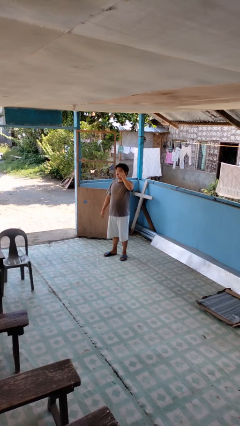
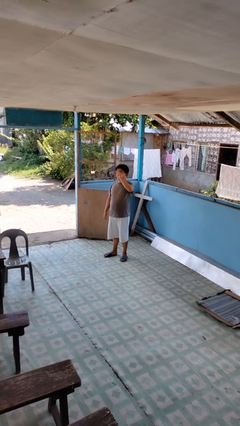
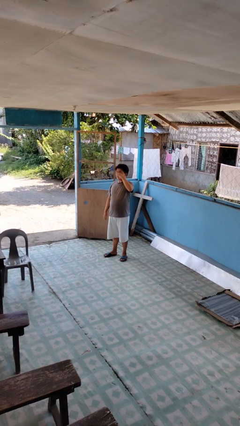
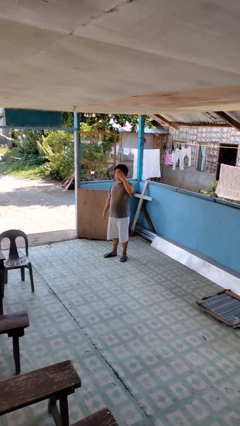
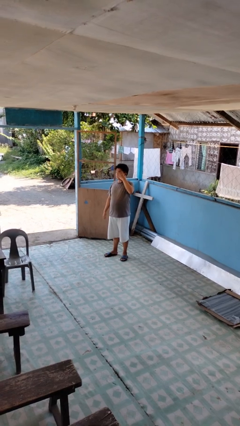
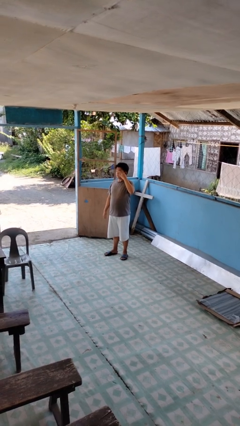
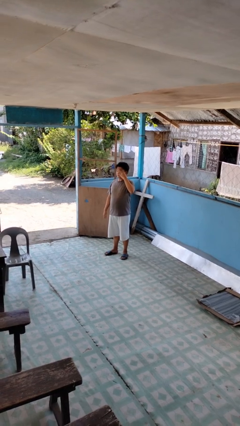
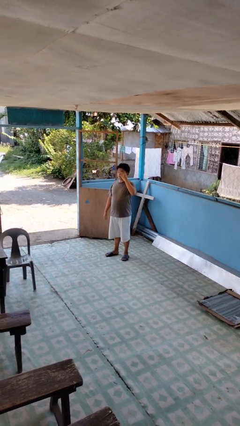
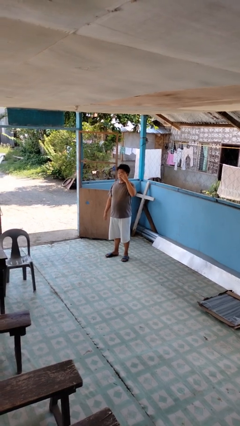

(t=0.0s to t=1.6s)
person rubs eyes

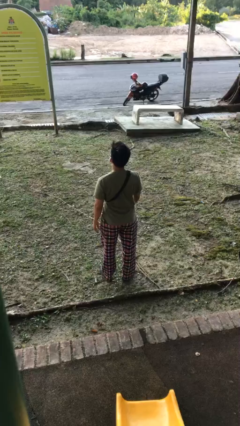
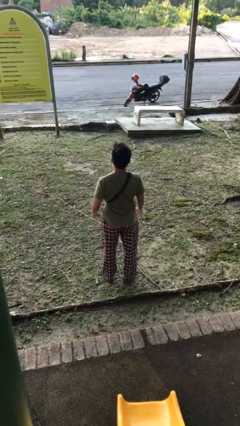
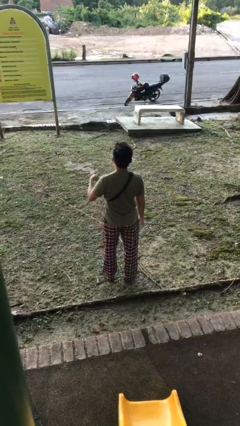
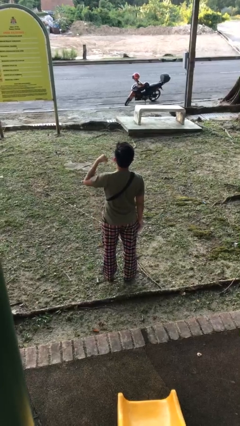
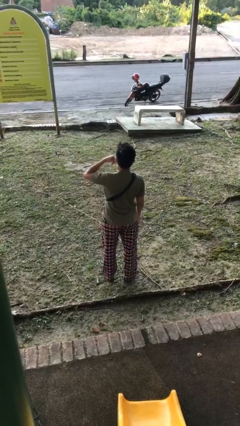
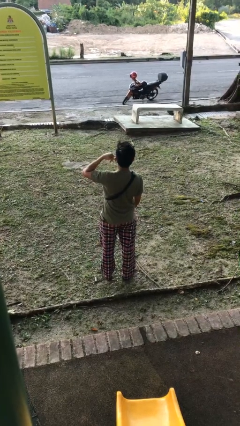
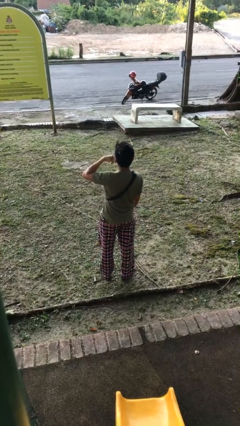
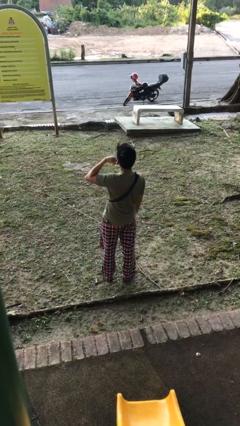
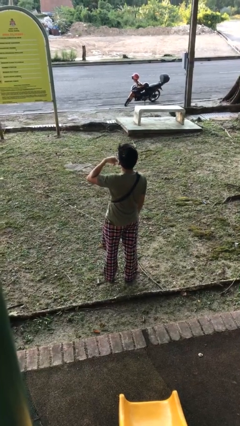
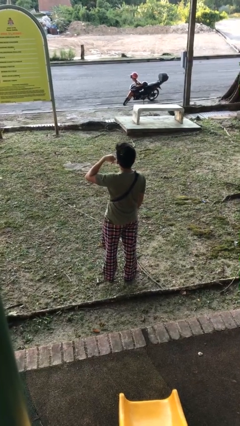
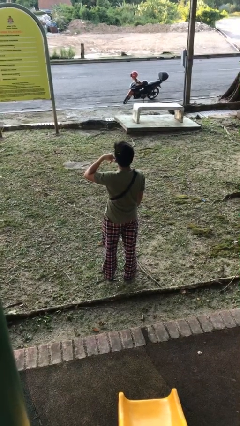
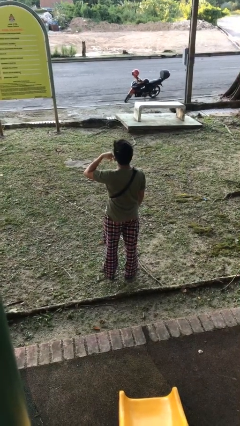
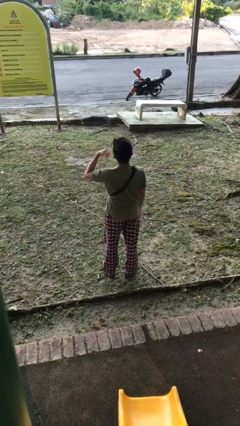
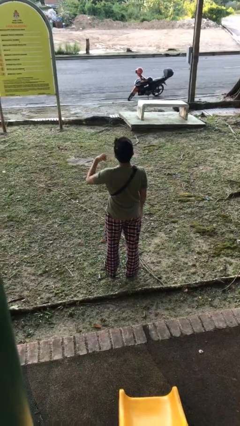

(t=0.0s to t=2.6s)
person gestures call me

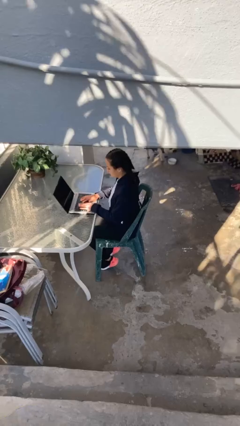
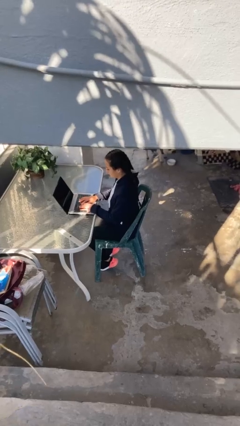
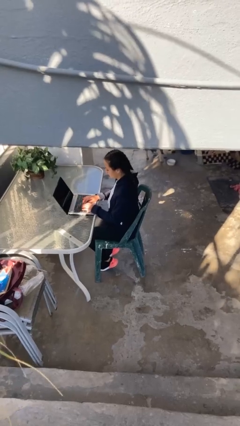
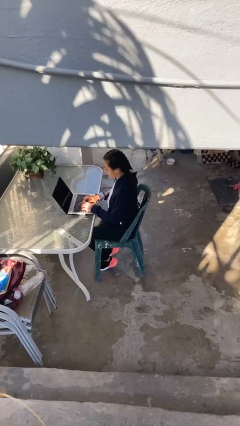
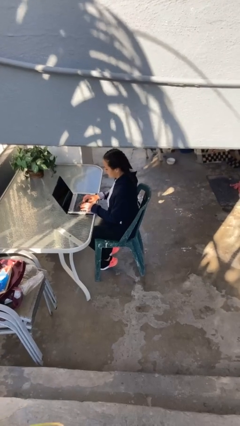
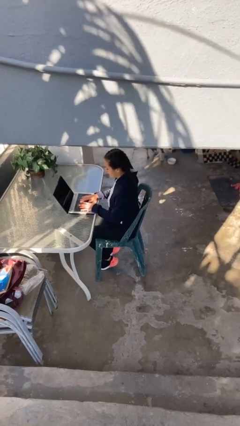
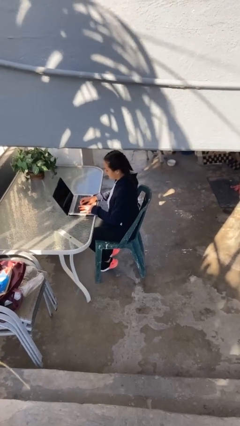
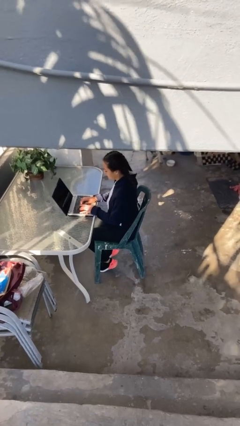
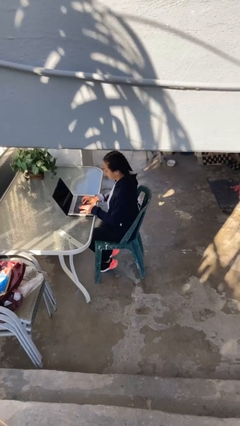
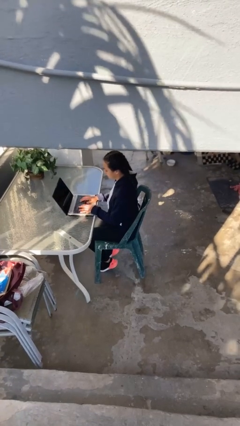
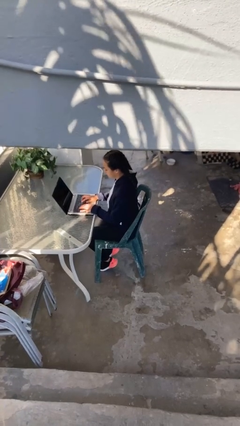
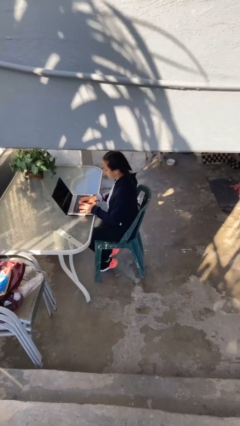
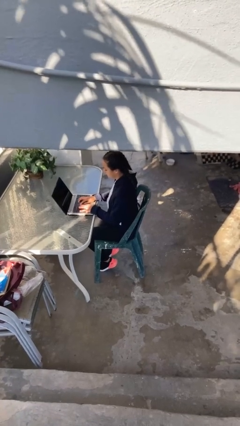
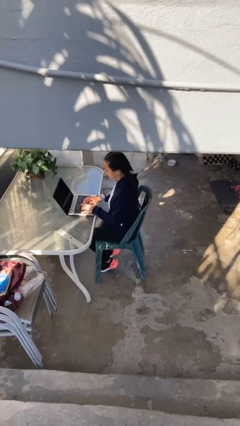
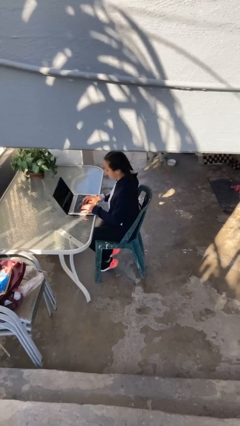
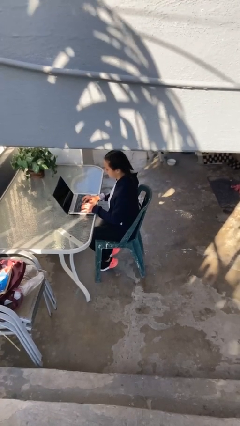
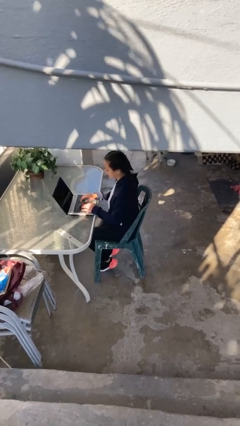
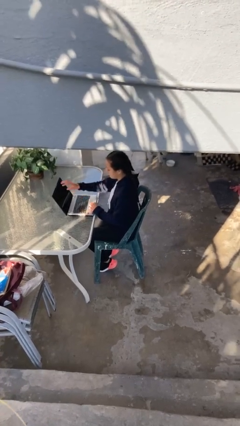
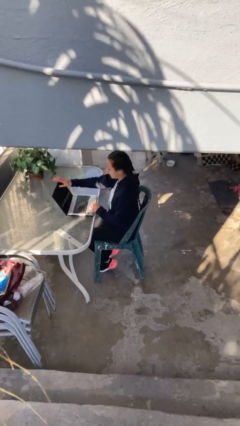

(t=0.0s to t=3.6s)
person interacts with laptop

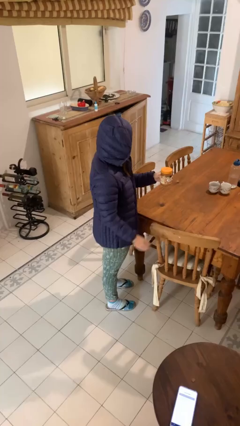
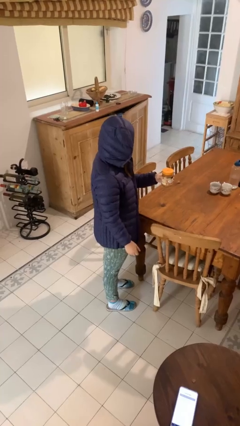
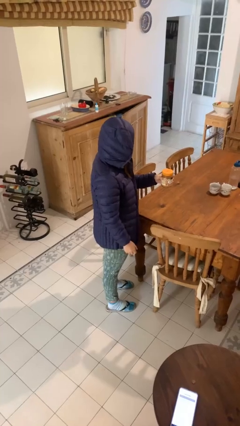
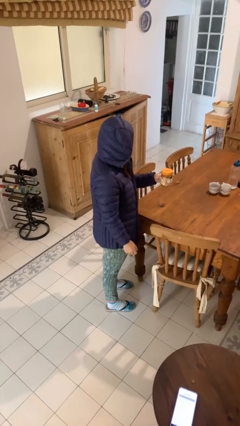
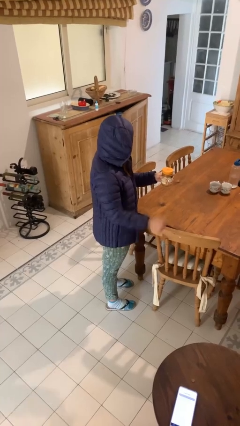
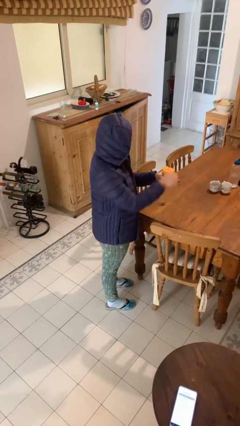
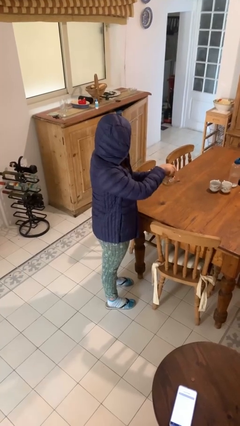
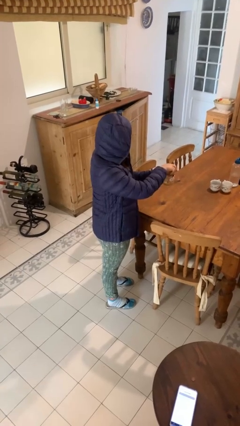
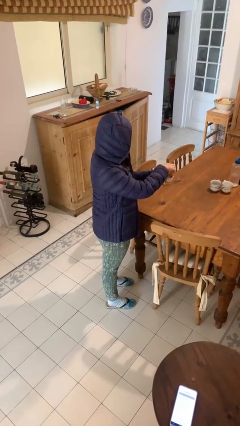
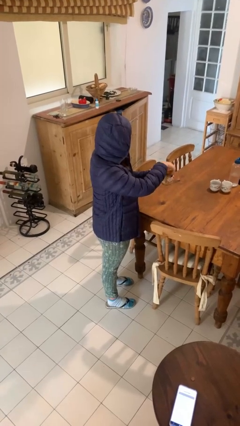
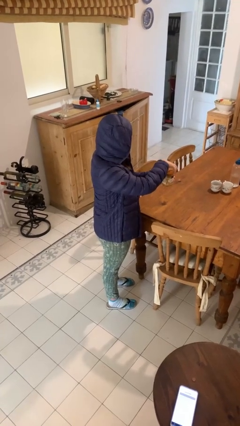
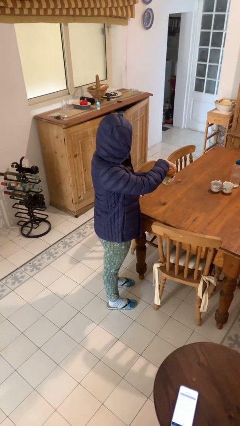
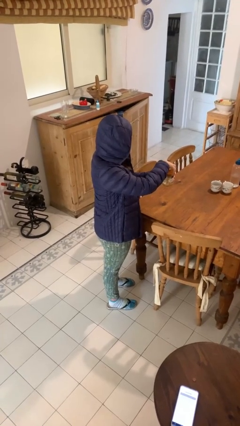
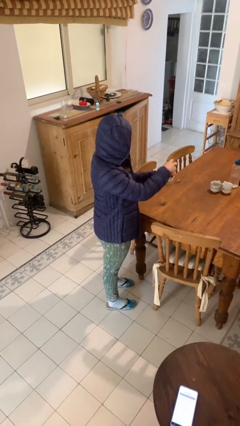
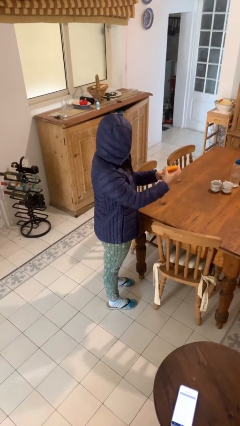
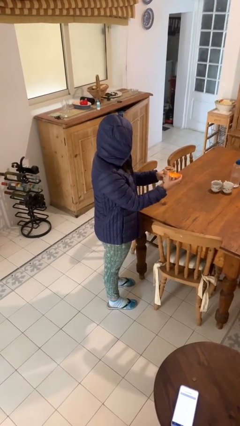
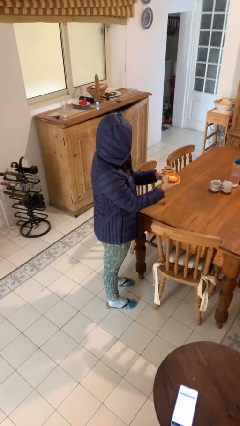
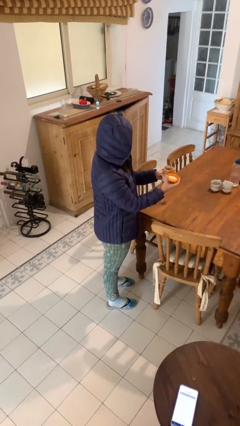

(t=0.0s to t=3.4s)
person opens jar

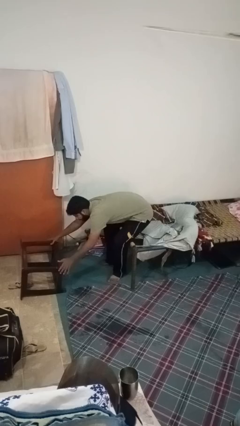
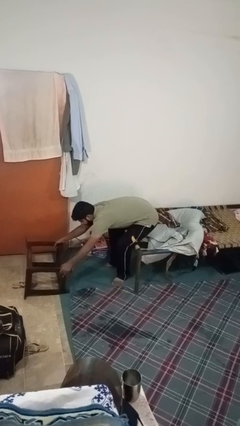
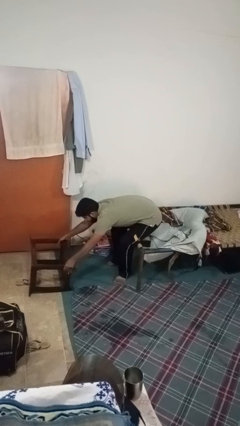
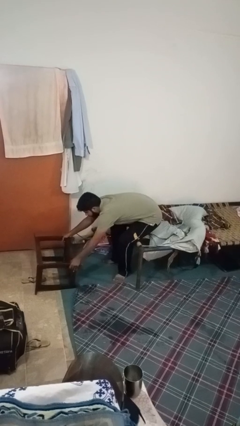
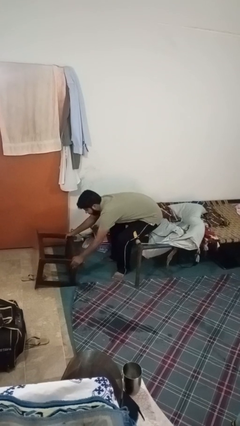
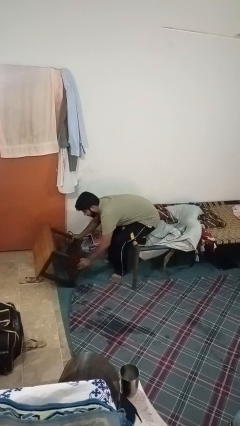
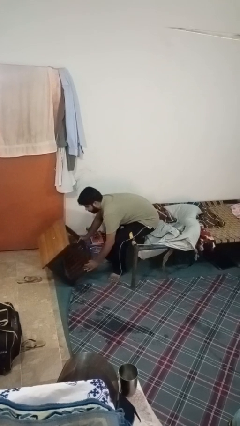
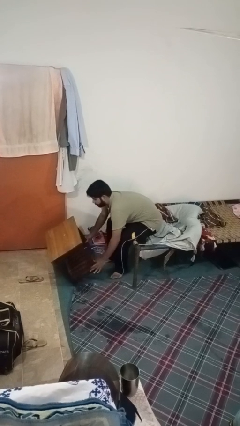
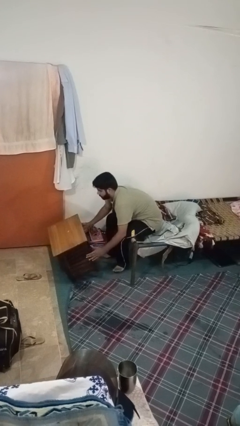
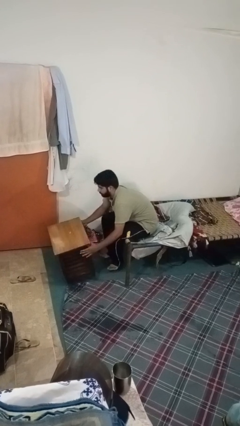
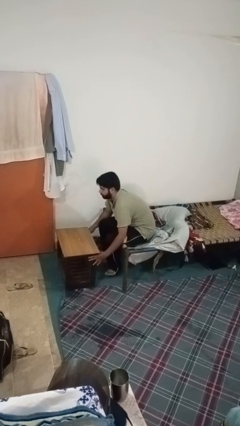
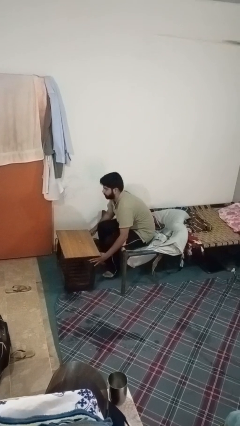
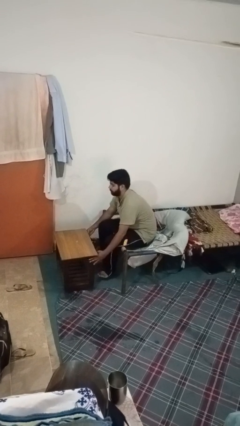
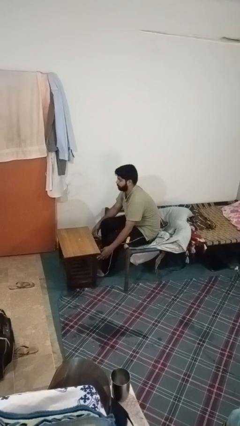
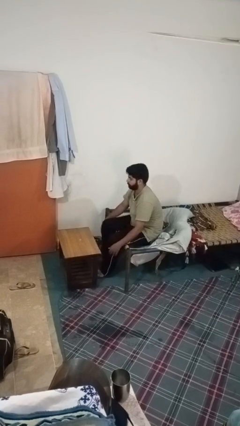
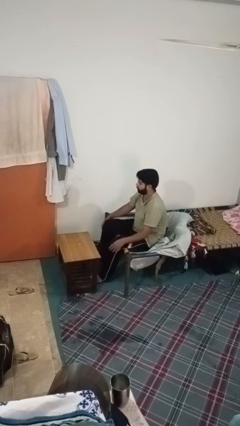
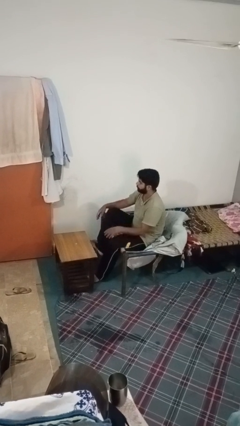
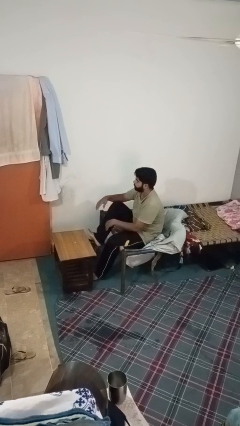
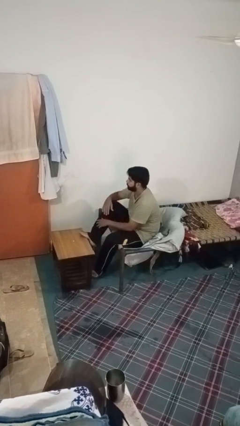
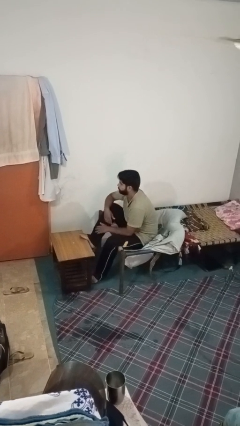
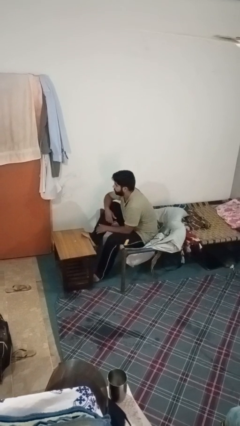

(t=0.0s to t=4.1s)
person sets upright furniture

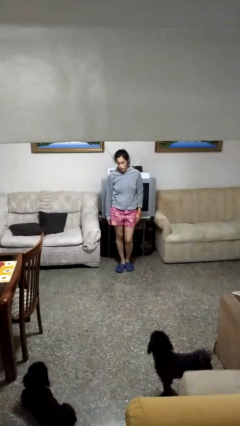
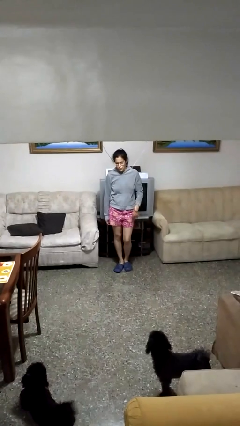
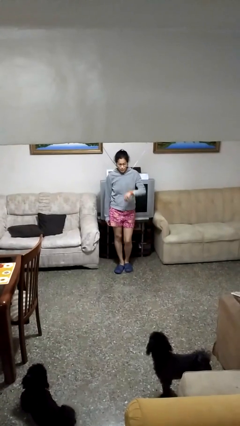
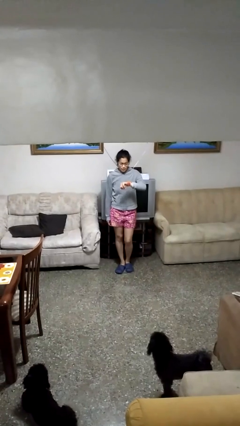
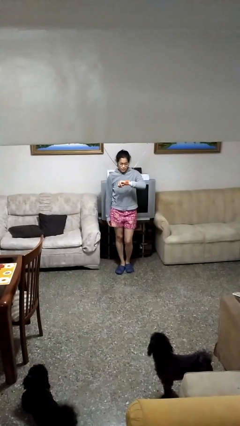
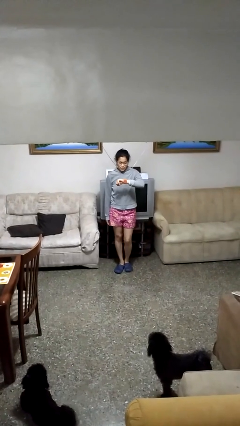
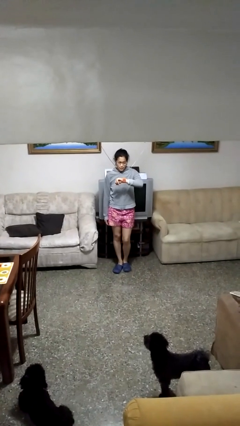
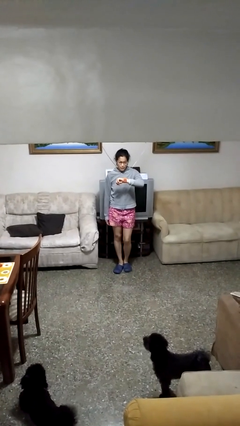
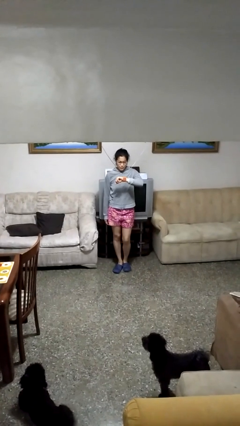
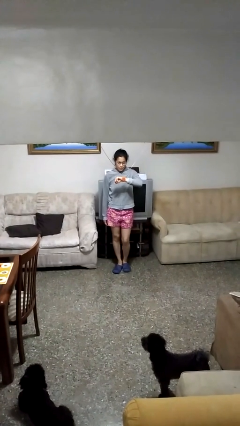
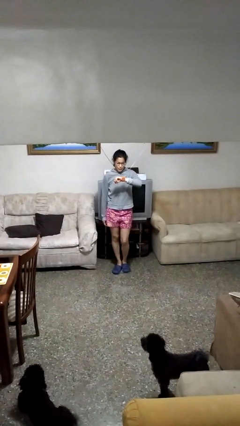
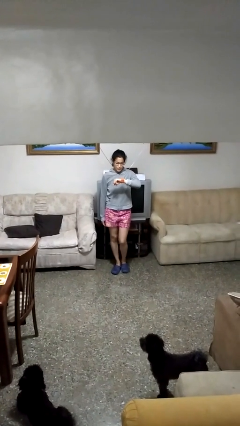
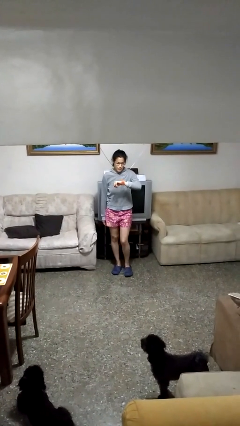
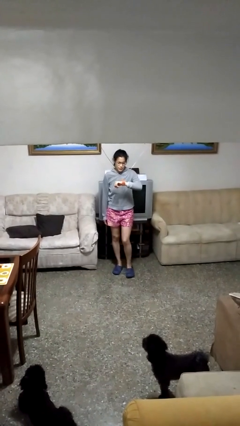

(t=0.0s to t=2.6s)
person looks at wristwatch
